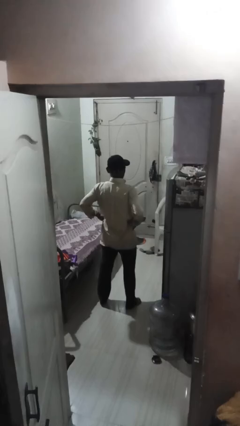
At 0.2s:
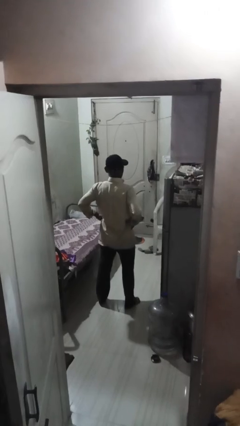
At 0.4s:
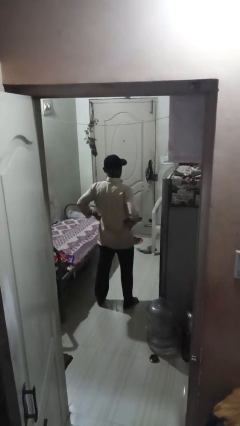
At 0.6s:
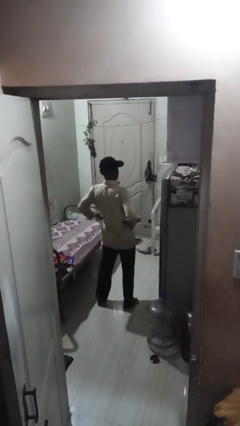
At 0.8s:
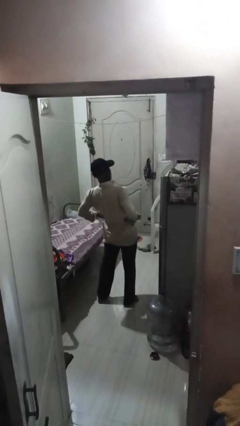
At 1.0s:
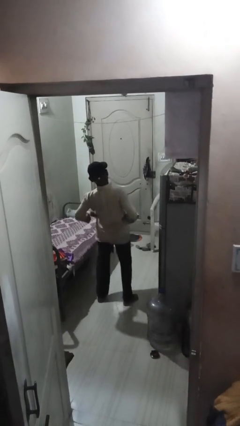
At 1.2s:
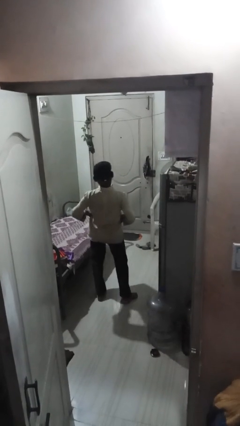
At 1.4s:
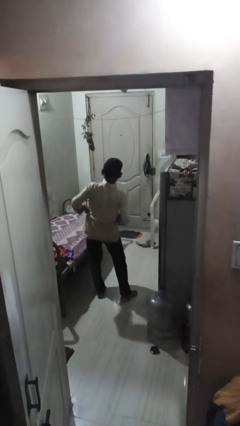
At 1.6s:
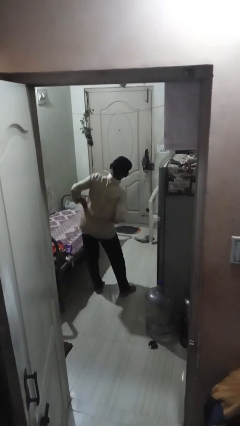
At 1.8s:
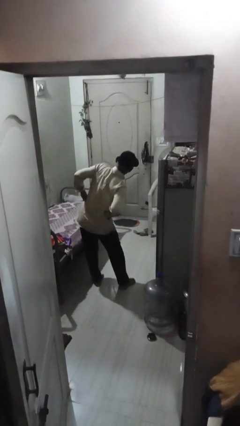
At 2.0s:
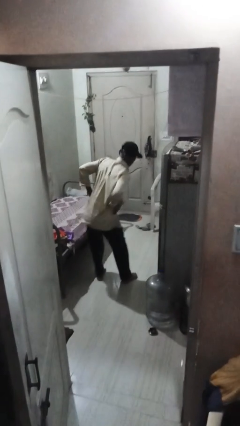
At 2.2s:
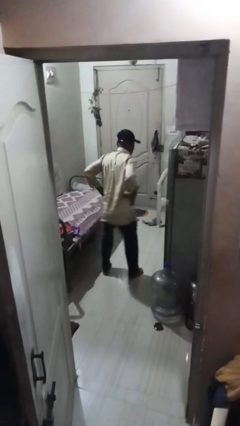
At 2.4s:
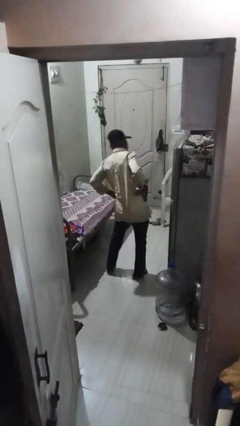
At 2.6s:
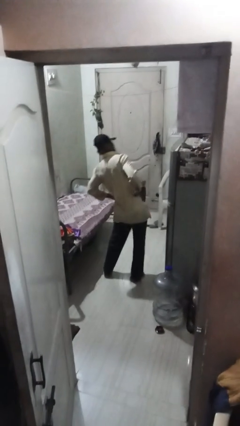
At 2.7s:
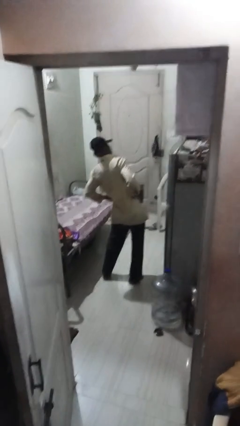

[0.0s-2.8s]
person wiggles hips

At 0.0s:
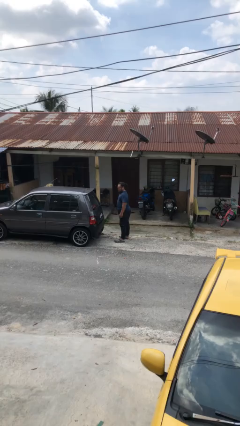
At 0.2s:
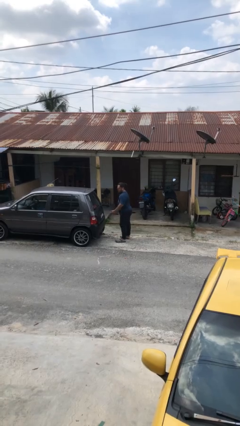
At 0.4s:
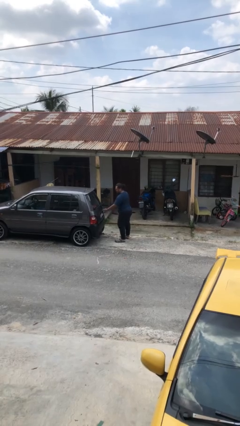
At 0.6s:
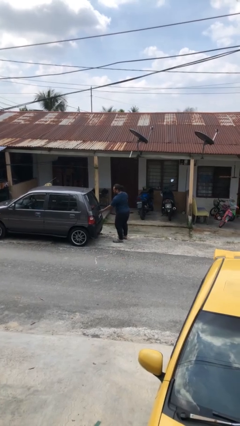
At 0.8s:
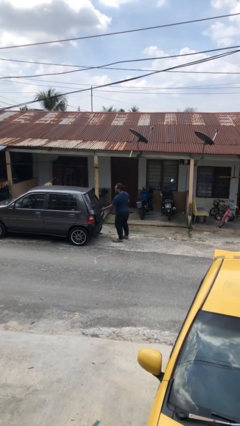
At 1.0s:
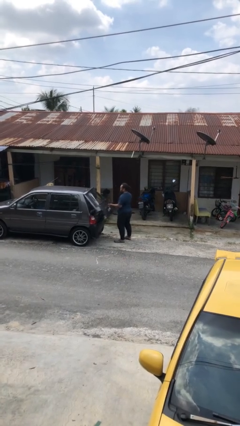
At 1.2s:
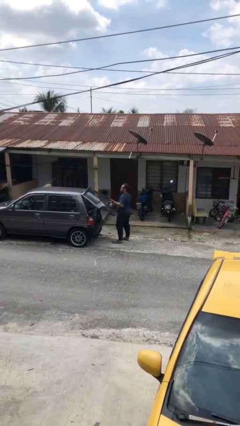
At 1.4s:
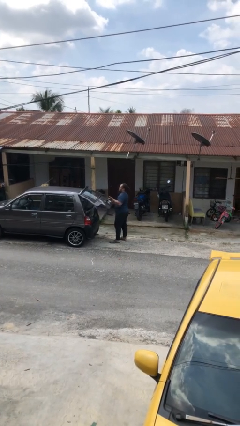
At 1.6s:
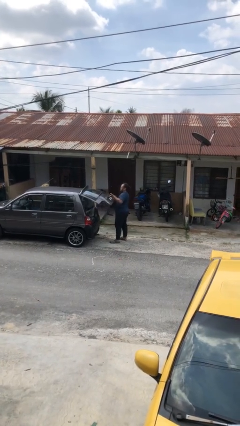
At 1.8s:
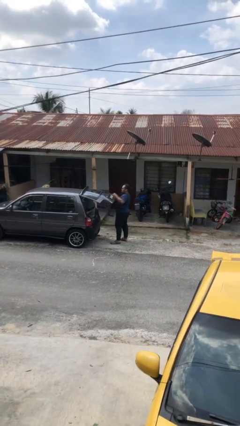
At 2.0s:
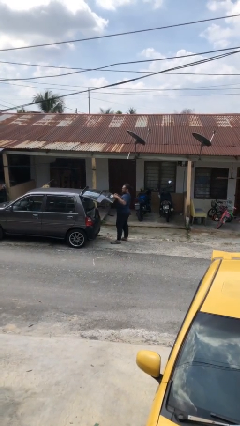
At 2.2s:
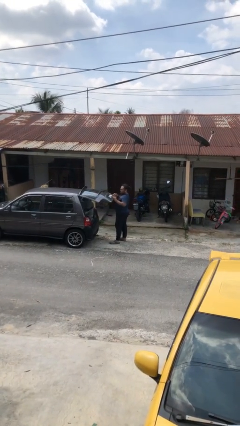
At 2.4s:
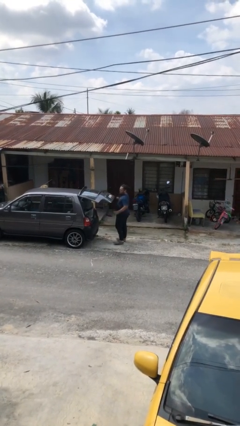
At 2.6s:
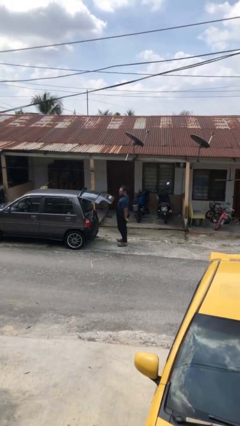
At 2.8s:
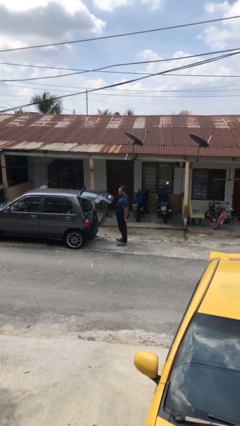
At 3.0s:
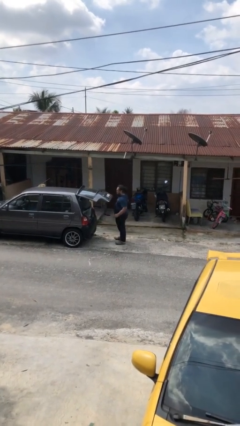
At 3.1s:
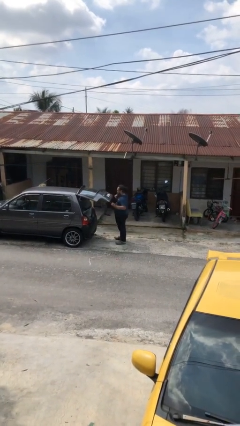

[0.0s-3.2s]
person opens car trunk

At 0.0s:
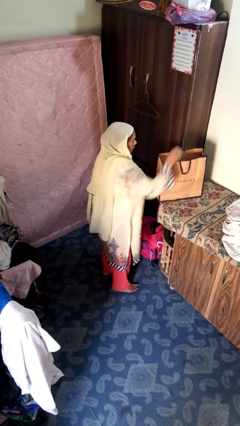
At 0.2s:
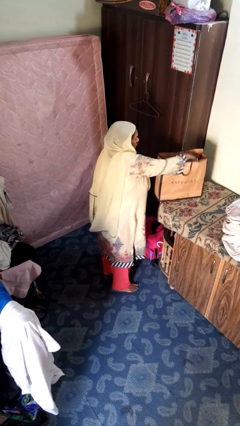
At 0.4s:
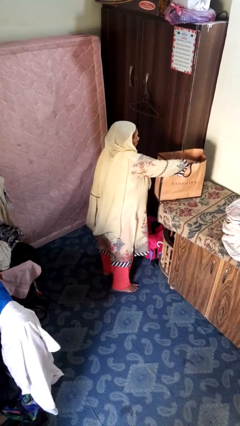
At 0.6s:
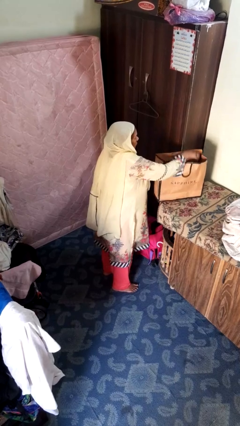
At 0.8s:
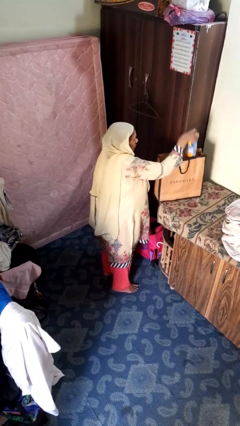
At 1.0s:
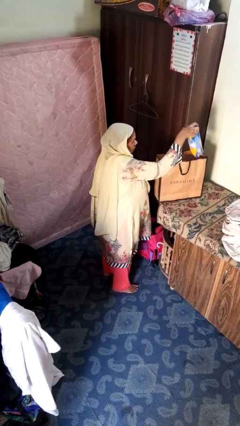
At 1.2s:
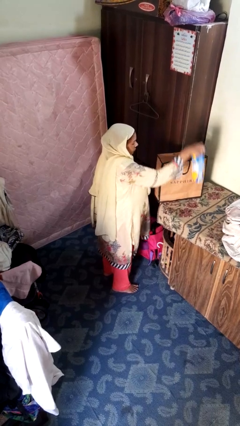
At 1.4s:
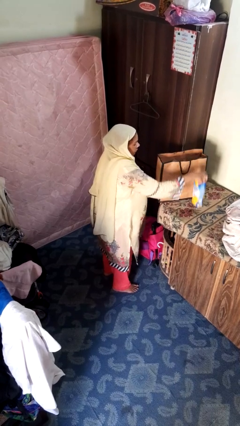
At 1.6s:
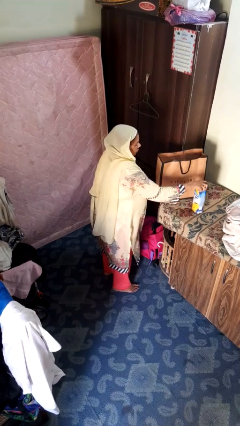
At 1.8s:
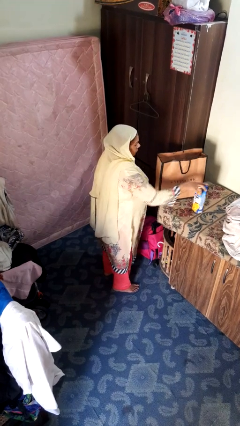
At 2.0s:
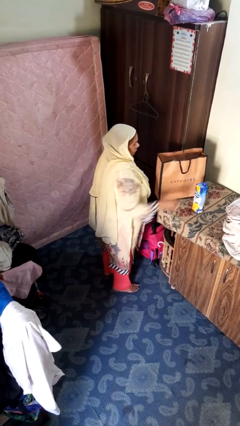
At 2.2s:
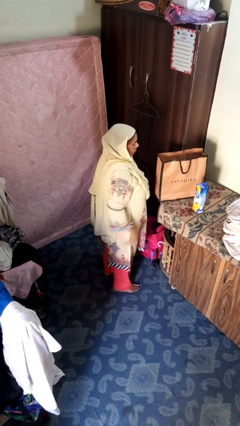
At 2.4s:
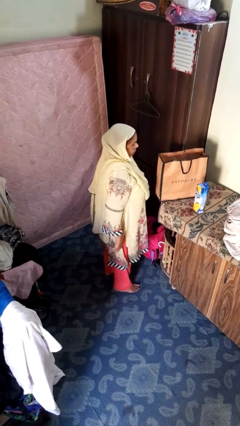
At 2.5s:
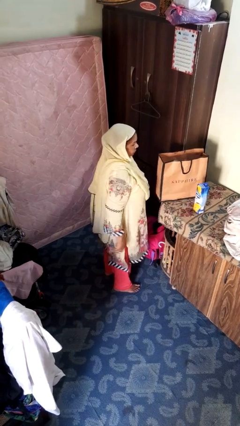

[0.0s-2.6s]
person takes object from bag

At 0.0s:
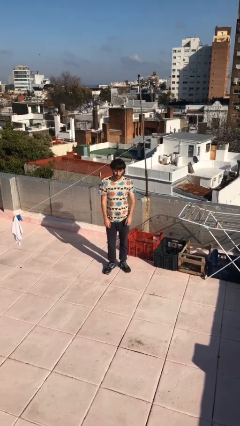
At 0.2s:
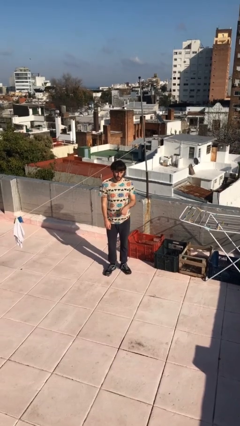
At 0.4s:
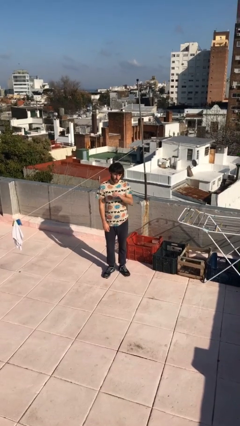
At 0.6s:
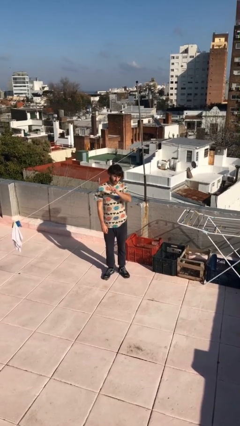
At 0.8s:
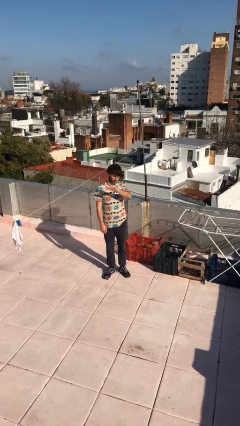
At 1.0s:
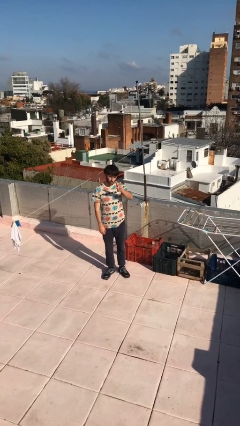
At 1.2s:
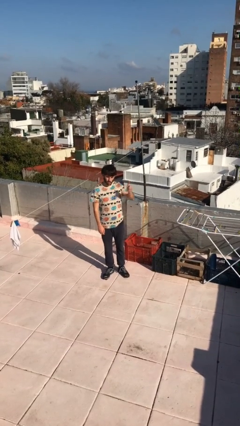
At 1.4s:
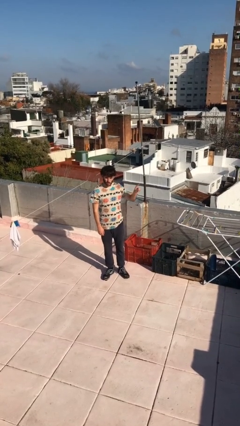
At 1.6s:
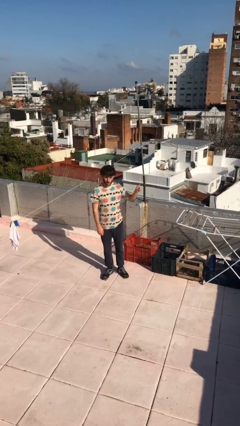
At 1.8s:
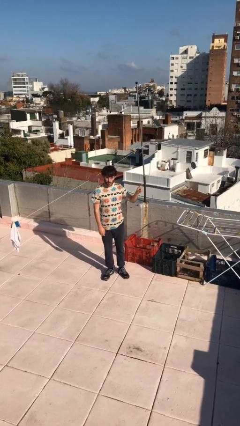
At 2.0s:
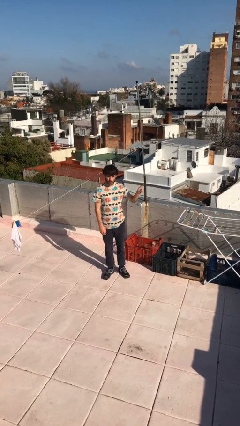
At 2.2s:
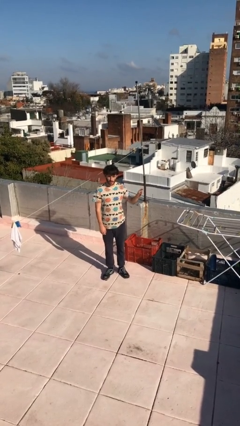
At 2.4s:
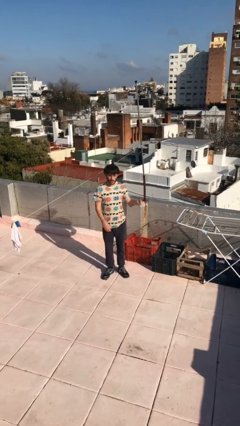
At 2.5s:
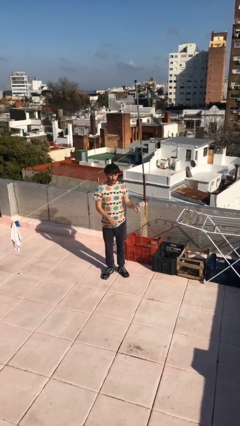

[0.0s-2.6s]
person gestures swipe left

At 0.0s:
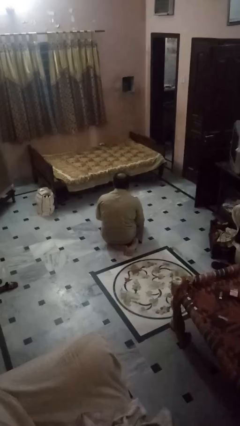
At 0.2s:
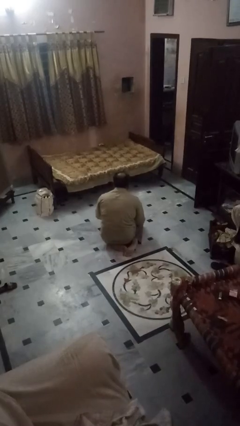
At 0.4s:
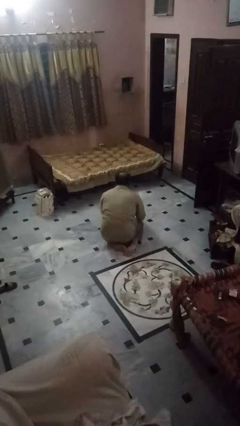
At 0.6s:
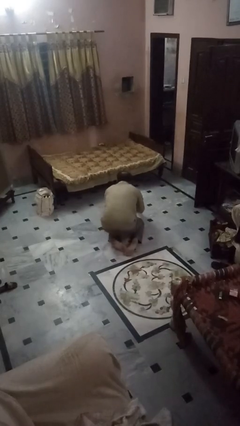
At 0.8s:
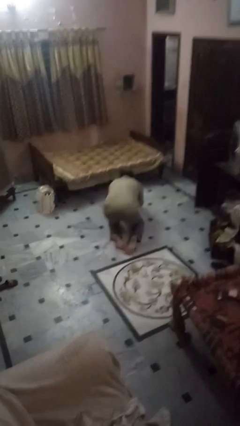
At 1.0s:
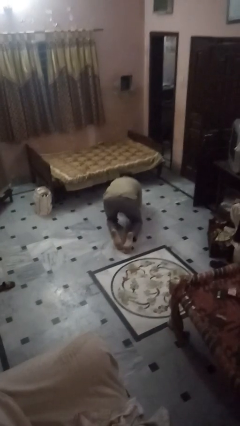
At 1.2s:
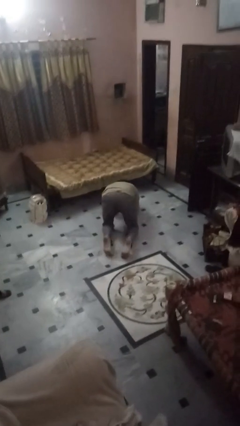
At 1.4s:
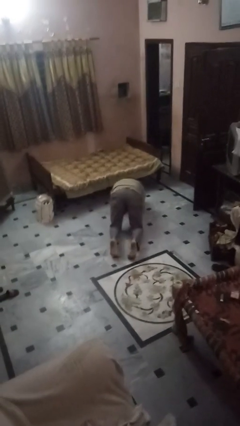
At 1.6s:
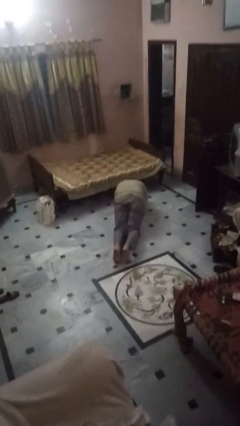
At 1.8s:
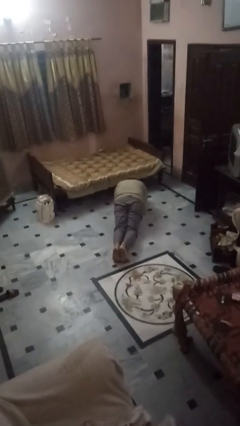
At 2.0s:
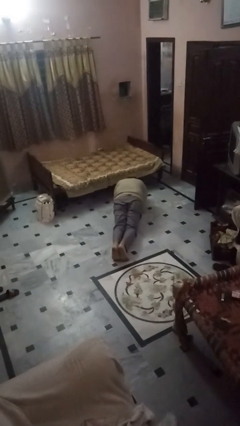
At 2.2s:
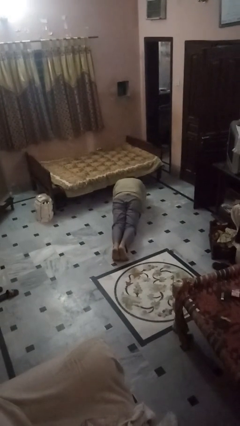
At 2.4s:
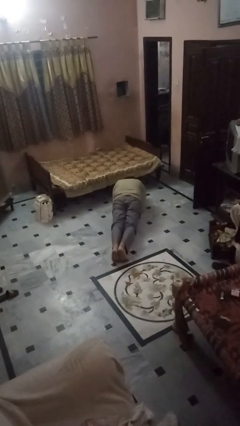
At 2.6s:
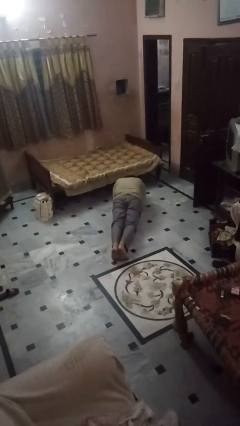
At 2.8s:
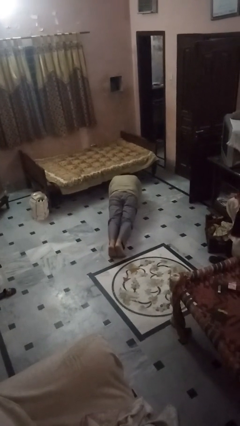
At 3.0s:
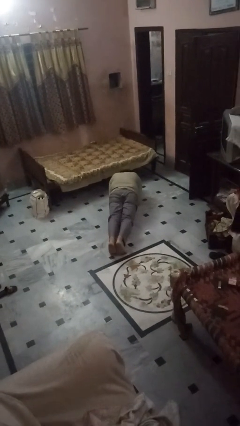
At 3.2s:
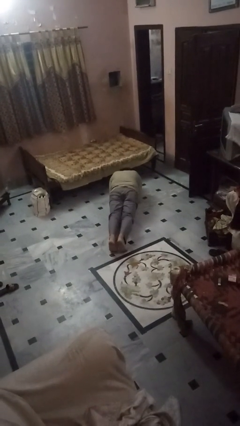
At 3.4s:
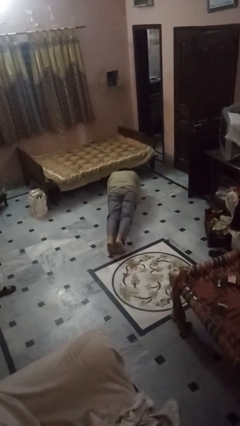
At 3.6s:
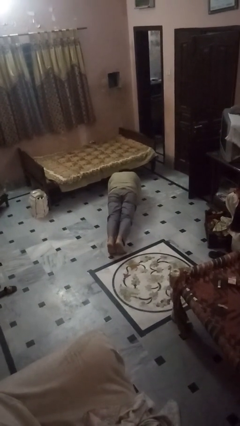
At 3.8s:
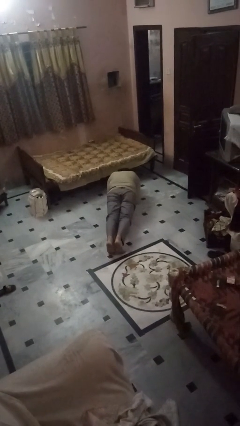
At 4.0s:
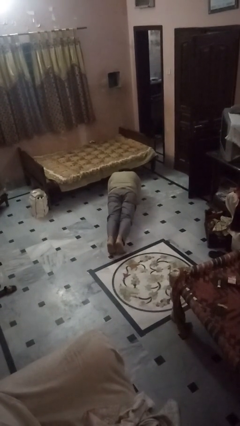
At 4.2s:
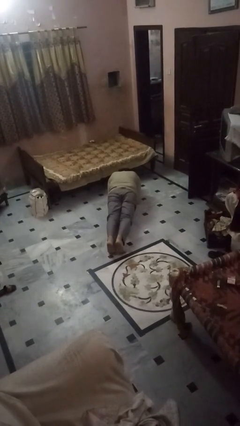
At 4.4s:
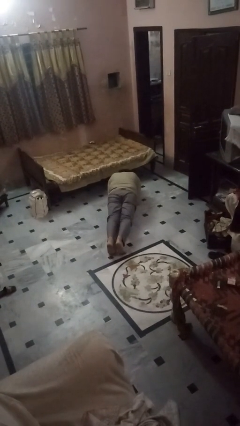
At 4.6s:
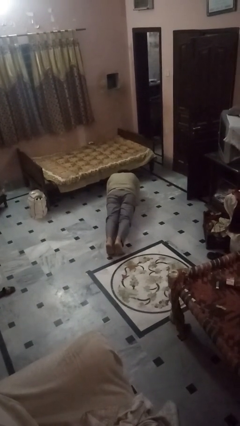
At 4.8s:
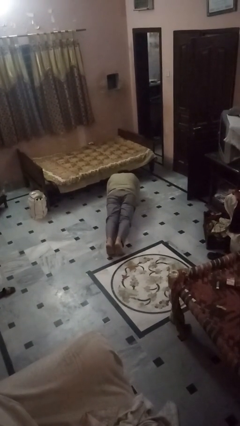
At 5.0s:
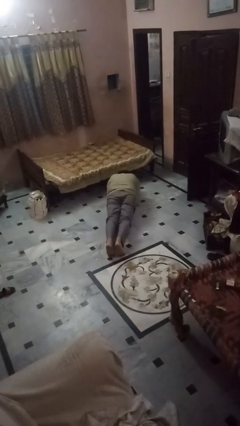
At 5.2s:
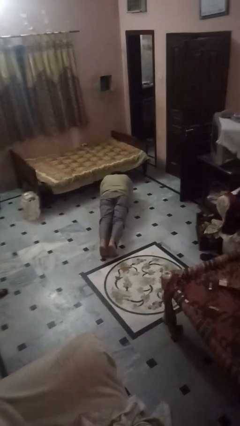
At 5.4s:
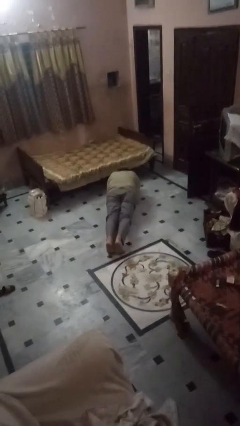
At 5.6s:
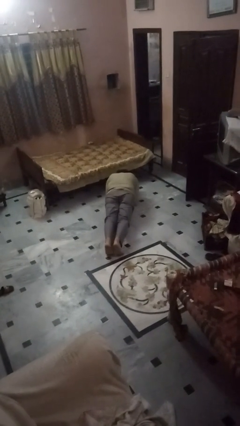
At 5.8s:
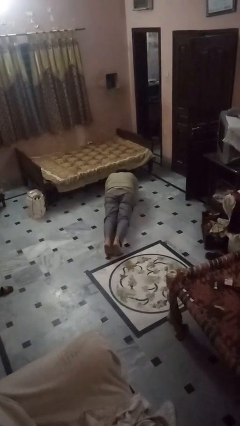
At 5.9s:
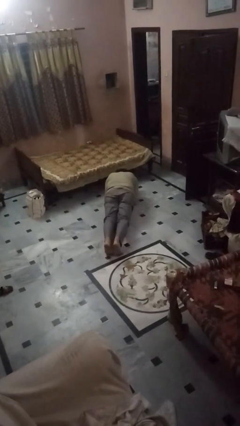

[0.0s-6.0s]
person exercises with plank
